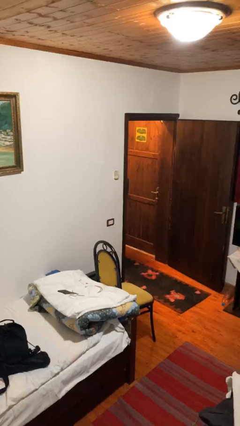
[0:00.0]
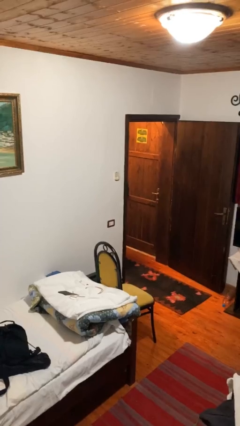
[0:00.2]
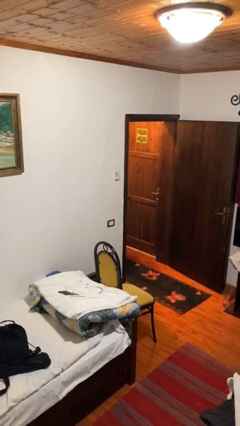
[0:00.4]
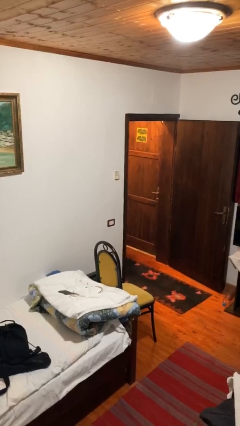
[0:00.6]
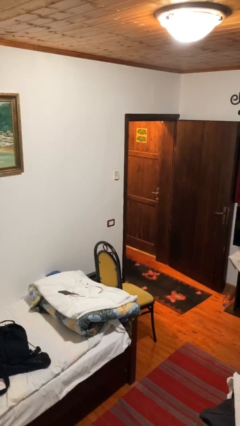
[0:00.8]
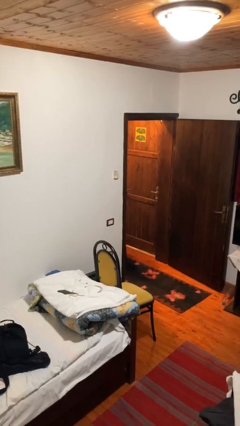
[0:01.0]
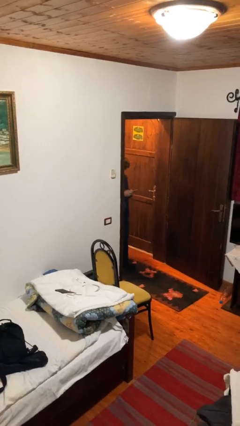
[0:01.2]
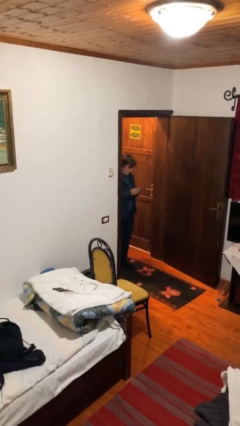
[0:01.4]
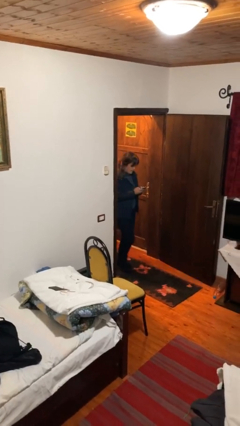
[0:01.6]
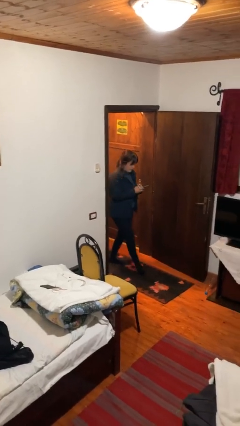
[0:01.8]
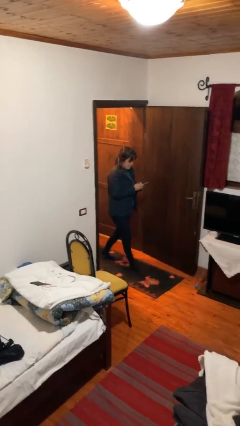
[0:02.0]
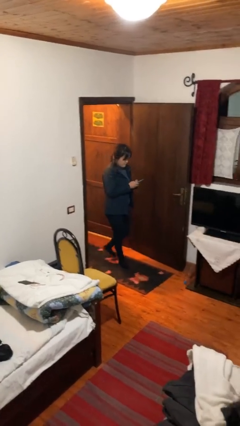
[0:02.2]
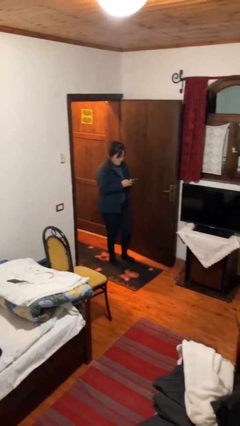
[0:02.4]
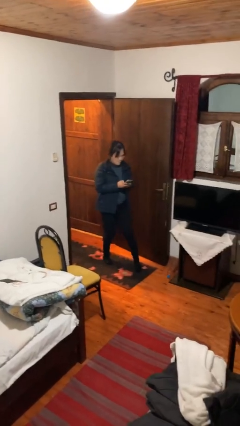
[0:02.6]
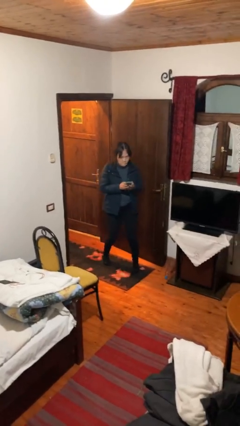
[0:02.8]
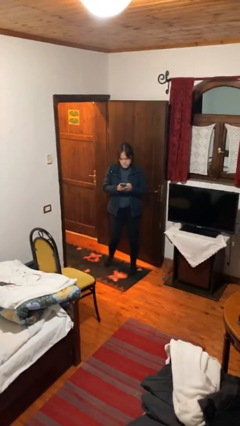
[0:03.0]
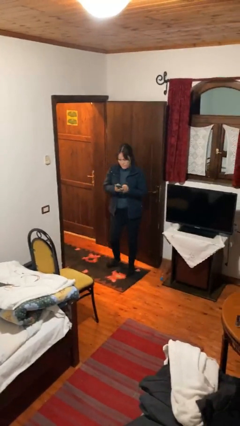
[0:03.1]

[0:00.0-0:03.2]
person enters scene through structure

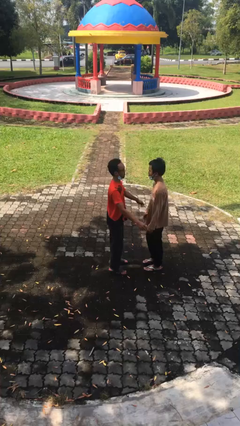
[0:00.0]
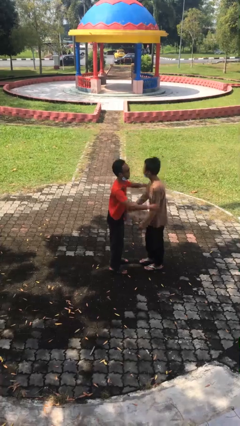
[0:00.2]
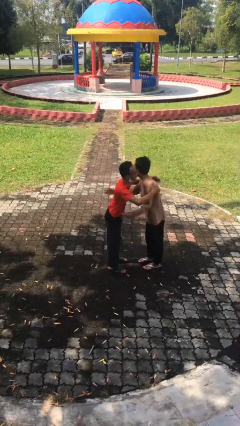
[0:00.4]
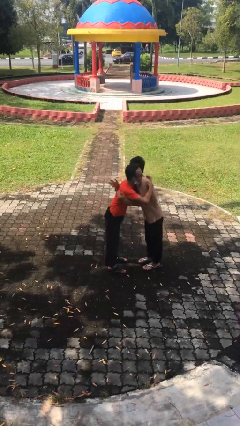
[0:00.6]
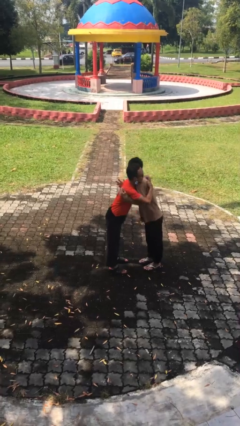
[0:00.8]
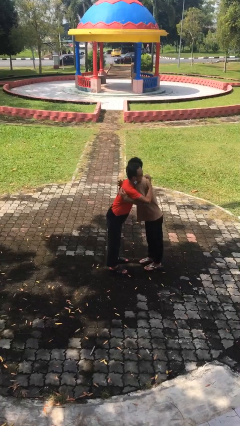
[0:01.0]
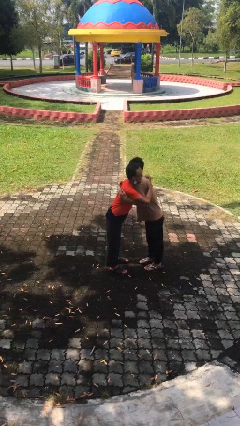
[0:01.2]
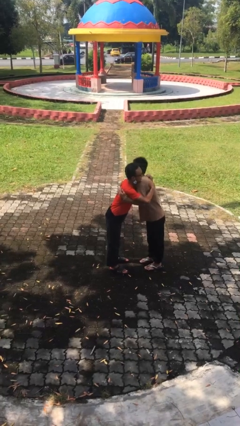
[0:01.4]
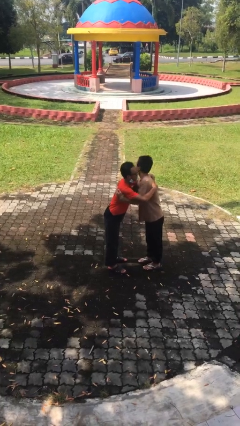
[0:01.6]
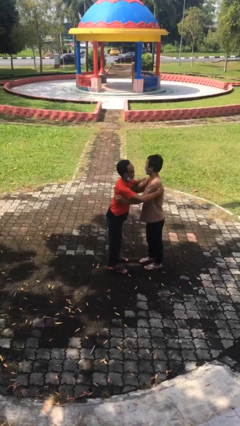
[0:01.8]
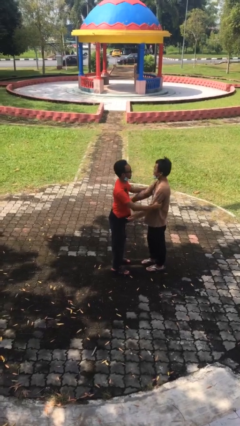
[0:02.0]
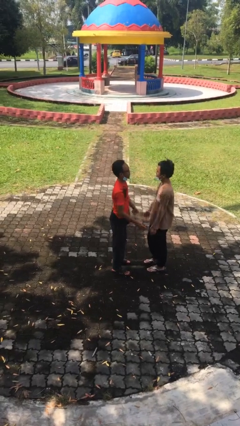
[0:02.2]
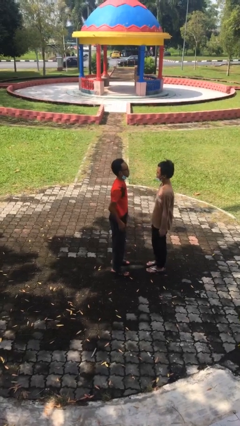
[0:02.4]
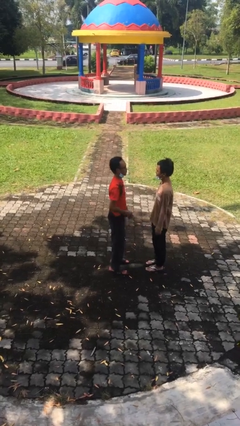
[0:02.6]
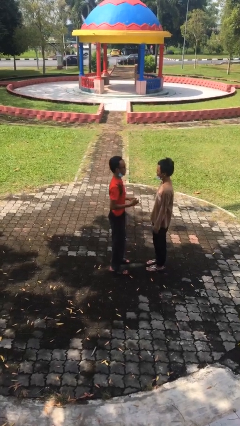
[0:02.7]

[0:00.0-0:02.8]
person embraces person

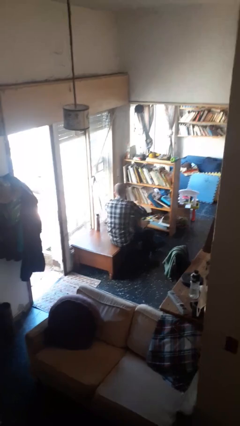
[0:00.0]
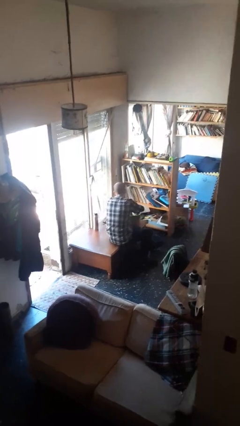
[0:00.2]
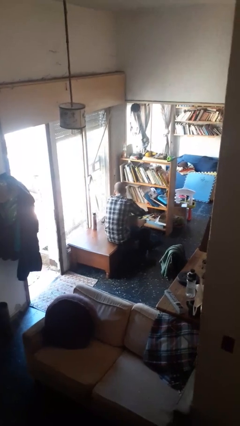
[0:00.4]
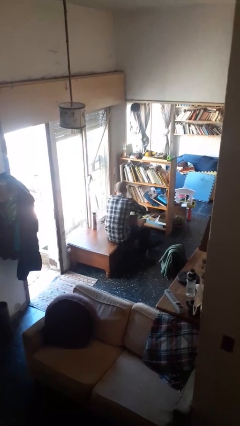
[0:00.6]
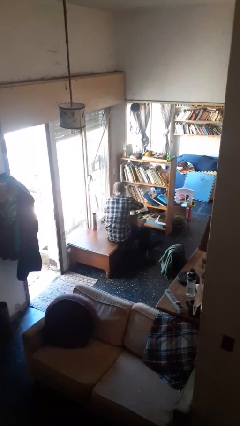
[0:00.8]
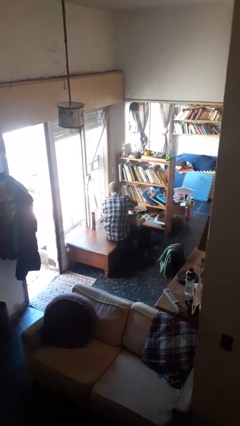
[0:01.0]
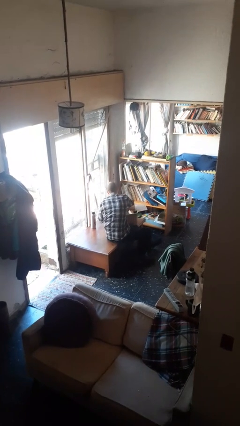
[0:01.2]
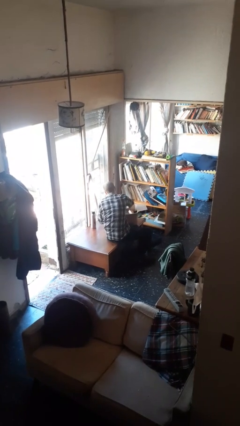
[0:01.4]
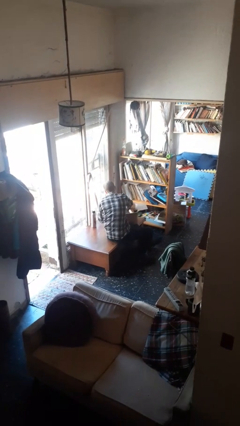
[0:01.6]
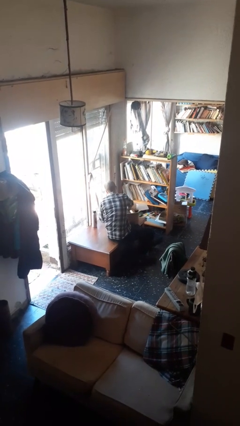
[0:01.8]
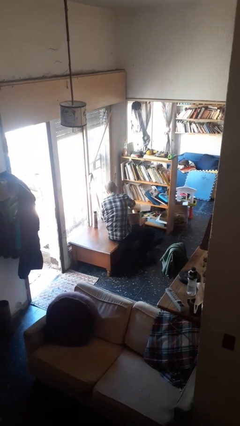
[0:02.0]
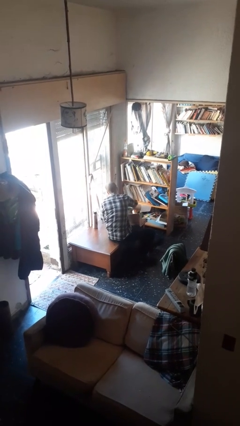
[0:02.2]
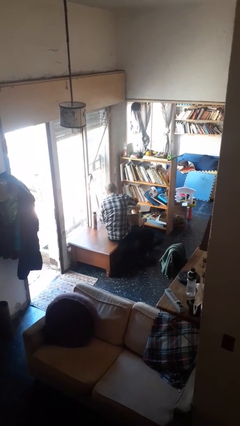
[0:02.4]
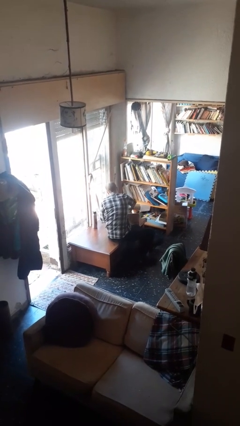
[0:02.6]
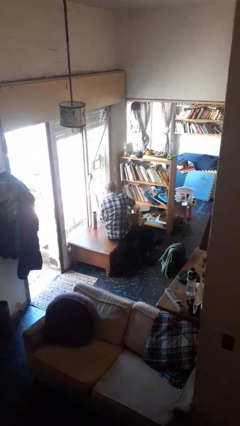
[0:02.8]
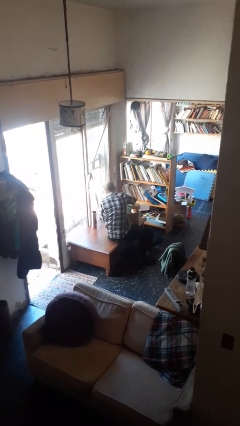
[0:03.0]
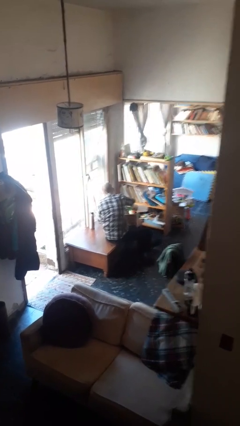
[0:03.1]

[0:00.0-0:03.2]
person searches in box

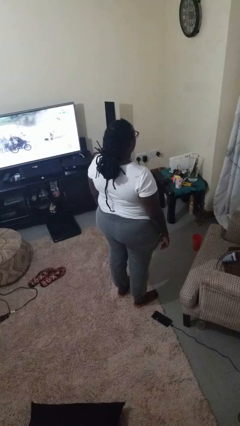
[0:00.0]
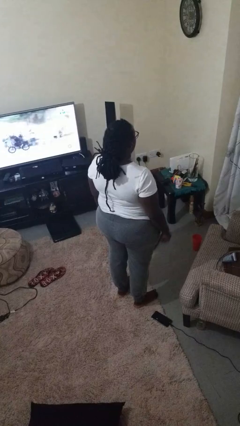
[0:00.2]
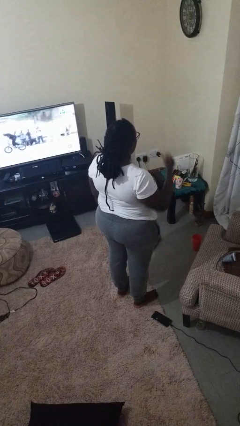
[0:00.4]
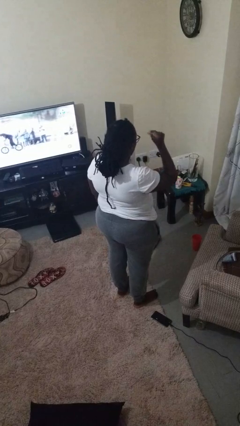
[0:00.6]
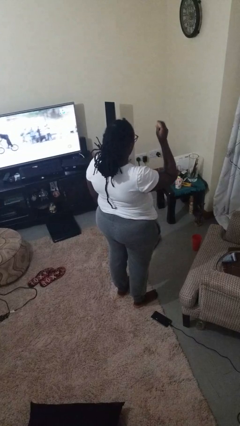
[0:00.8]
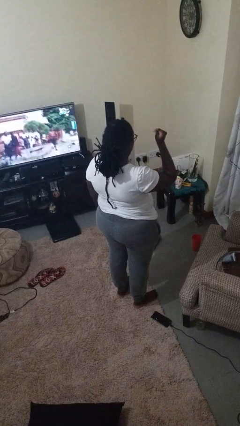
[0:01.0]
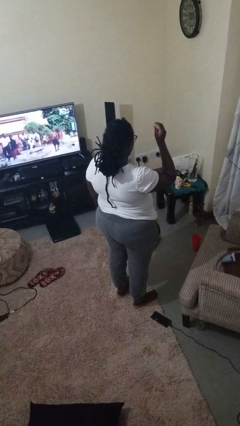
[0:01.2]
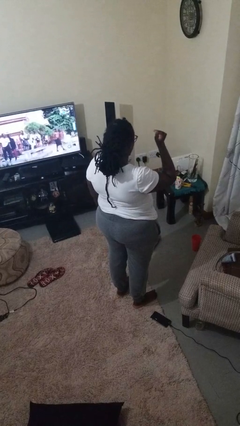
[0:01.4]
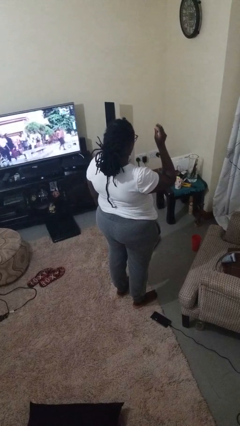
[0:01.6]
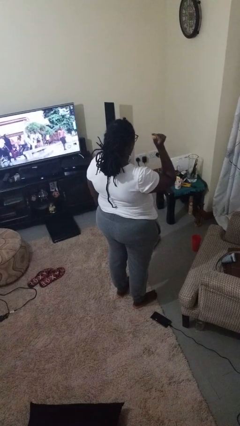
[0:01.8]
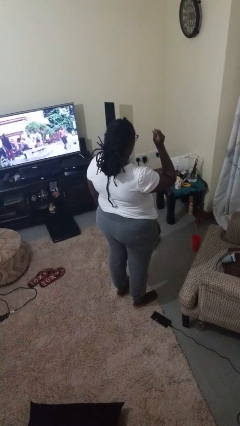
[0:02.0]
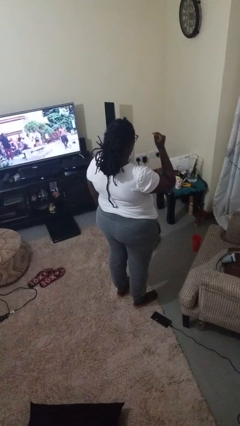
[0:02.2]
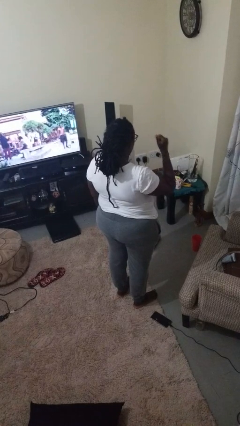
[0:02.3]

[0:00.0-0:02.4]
person snaps fingers

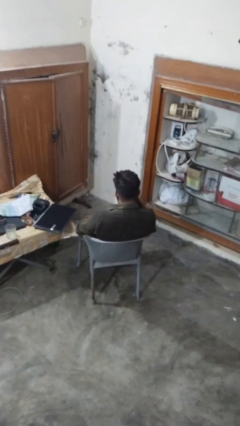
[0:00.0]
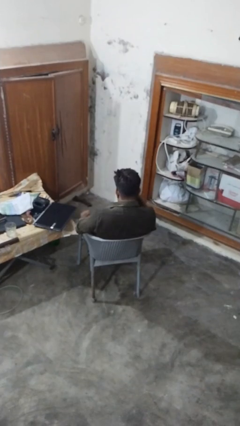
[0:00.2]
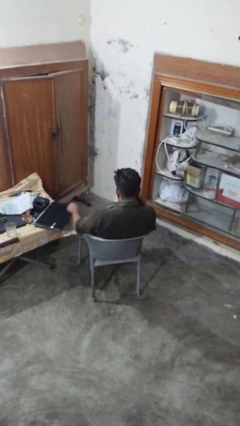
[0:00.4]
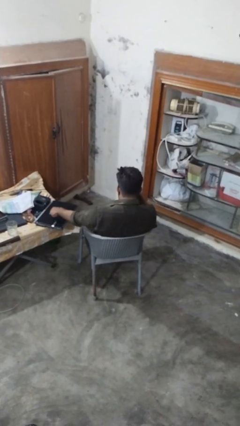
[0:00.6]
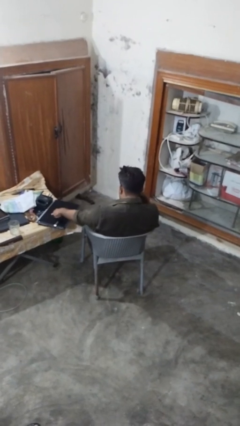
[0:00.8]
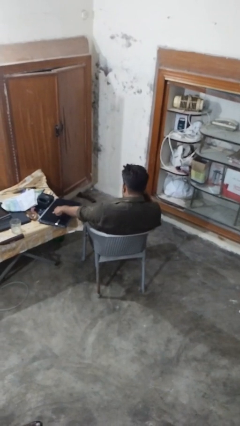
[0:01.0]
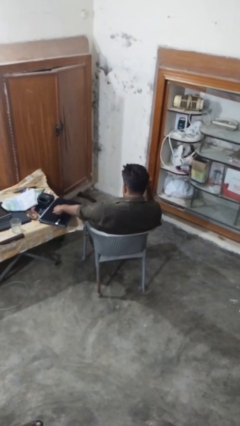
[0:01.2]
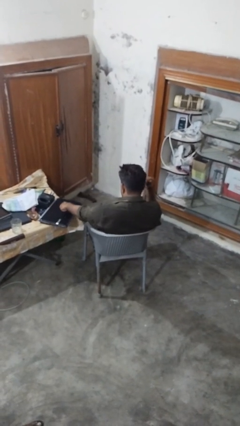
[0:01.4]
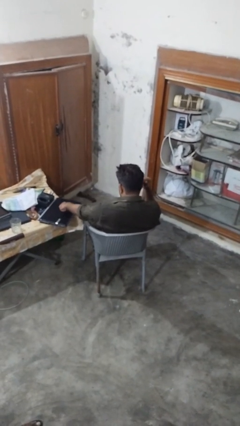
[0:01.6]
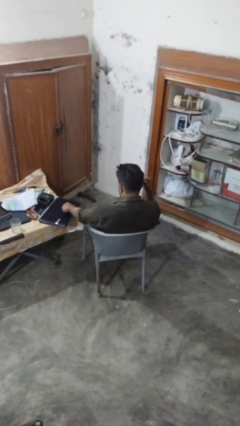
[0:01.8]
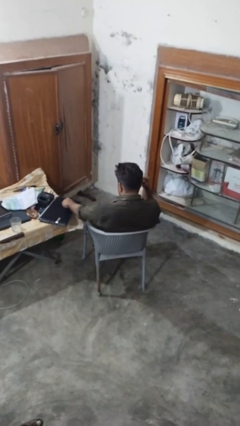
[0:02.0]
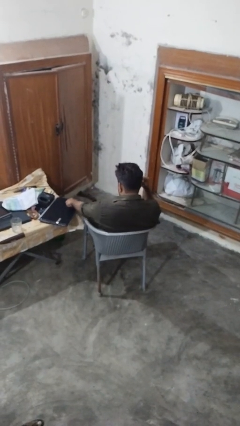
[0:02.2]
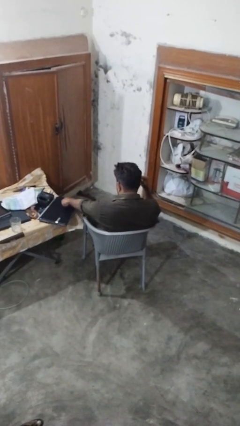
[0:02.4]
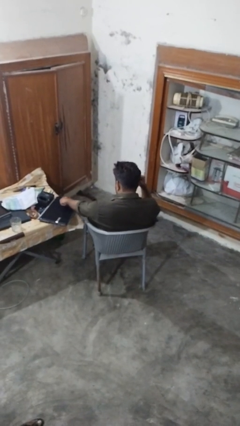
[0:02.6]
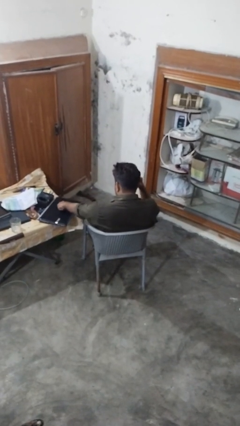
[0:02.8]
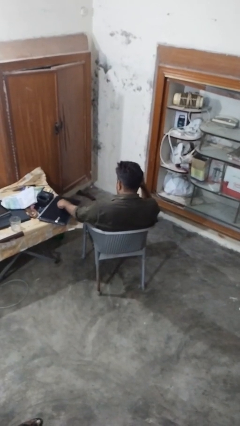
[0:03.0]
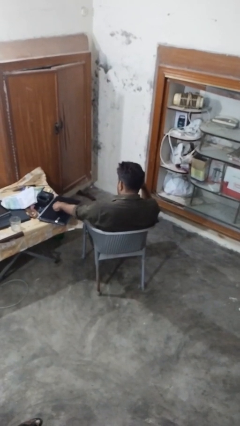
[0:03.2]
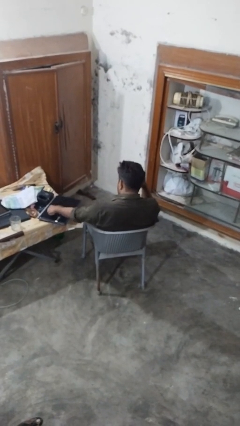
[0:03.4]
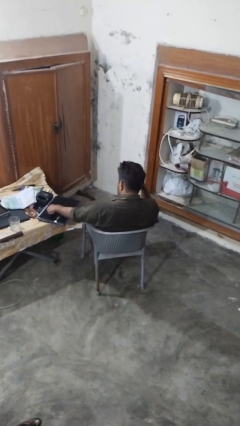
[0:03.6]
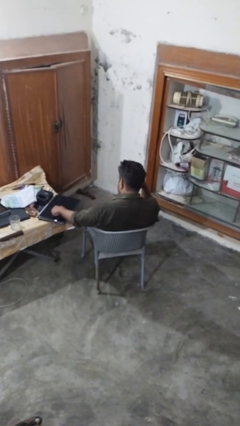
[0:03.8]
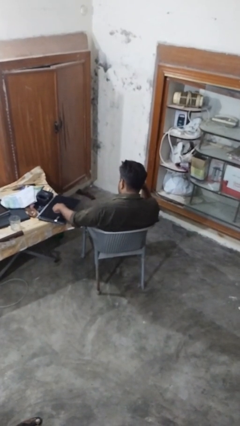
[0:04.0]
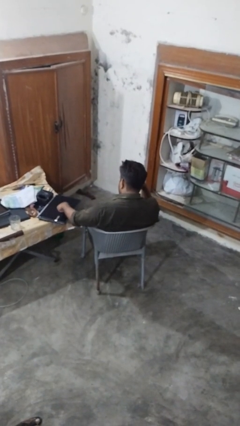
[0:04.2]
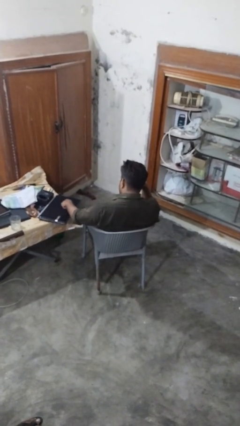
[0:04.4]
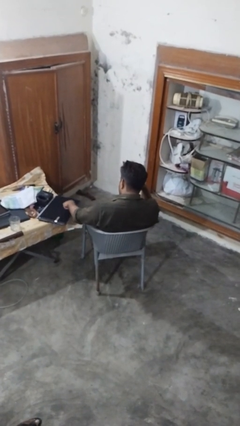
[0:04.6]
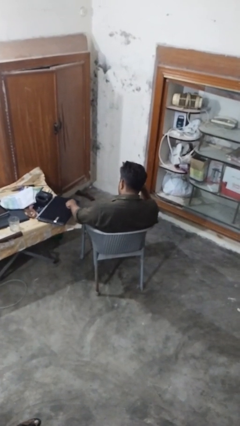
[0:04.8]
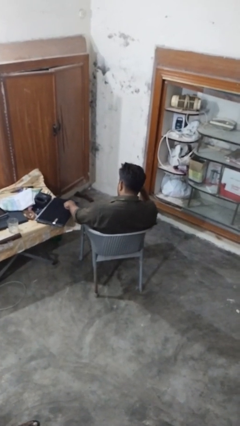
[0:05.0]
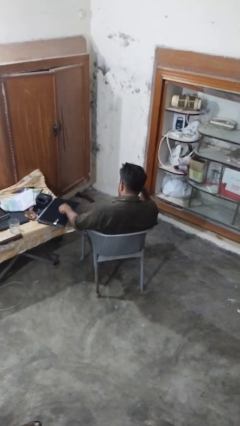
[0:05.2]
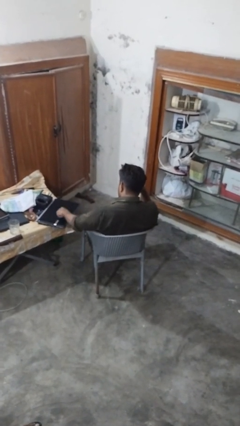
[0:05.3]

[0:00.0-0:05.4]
person taps object with finger

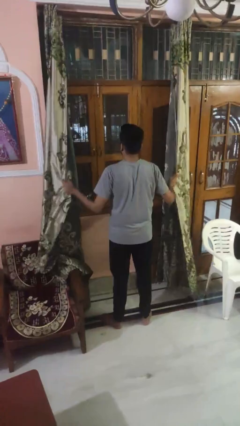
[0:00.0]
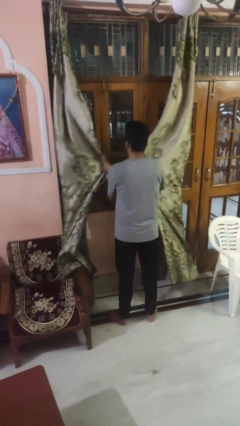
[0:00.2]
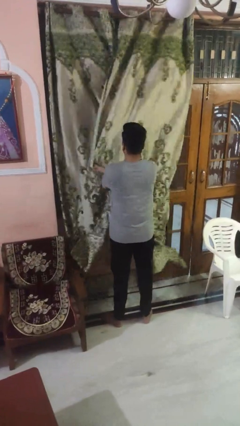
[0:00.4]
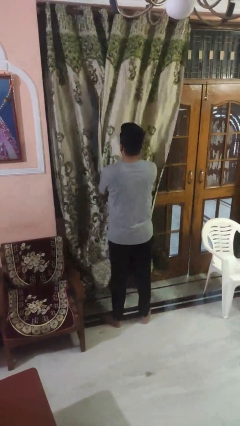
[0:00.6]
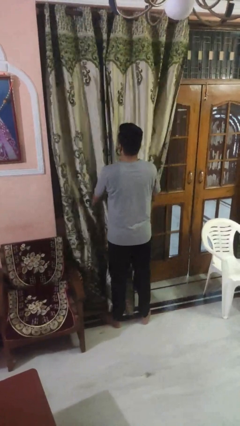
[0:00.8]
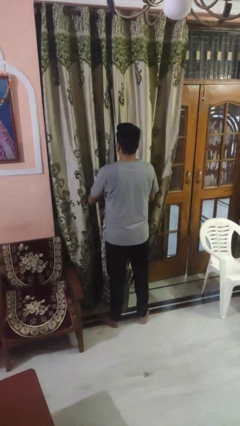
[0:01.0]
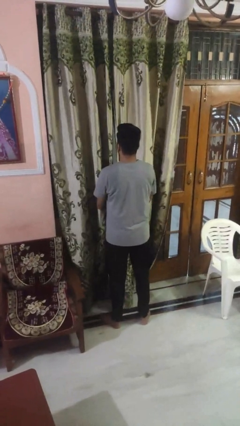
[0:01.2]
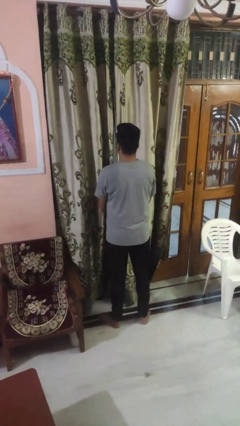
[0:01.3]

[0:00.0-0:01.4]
person closes curtains
